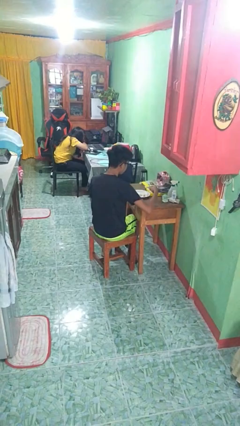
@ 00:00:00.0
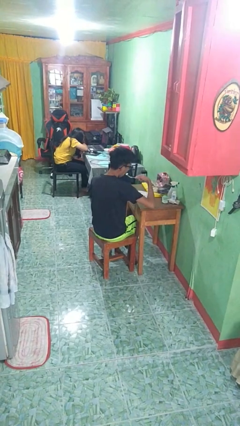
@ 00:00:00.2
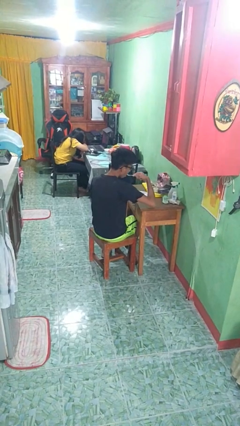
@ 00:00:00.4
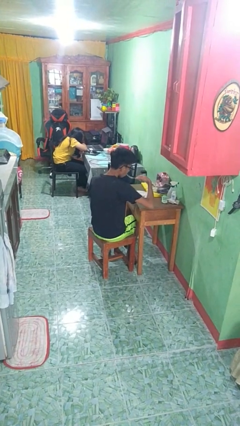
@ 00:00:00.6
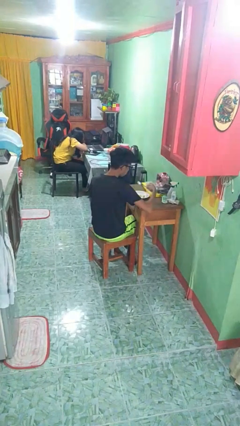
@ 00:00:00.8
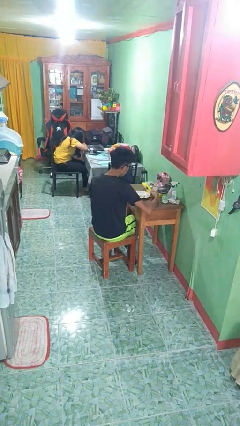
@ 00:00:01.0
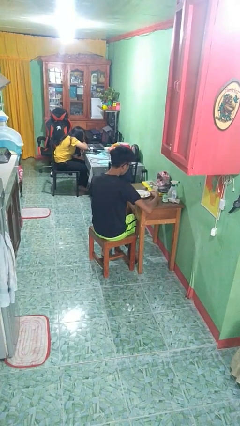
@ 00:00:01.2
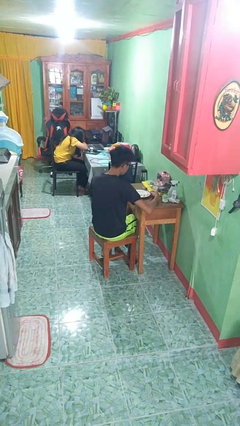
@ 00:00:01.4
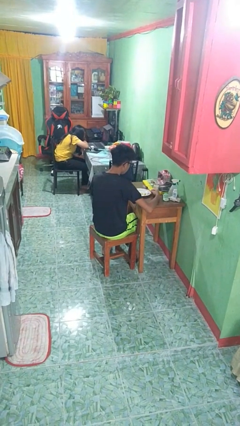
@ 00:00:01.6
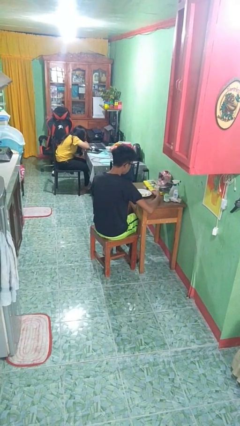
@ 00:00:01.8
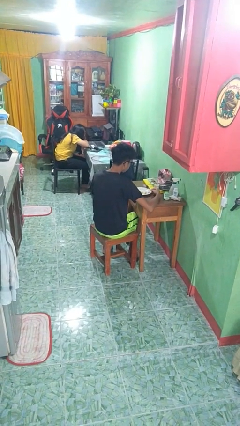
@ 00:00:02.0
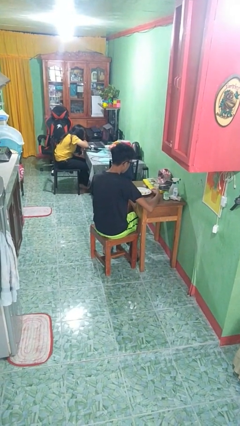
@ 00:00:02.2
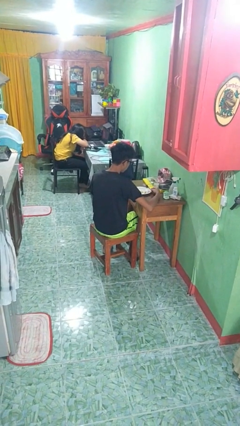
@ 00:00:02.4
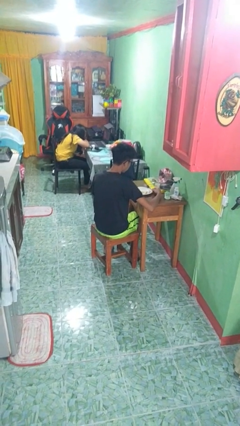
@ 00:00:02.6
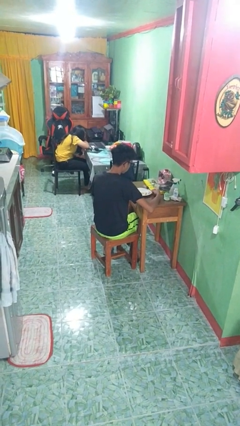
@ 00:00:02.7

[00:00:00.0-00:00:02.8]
person eats with utensil

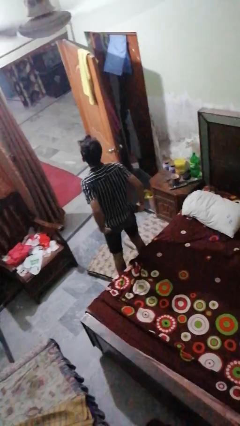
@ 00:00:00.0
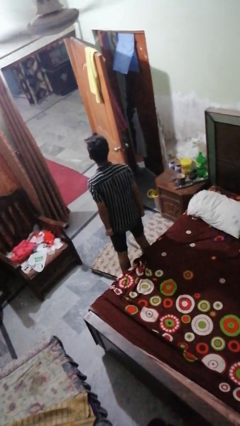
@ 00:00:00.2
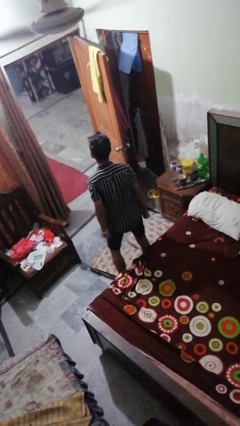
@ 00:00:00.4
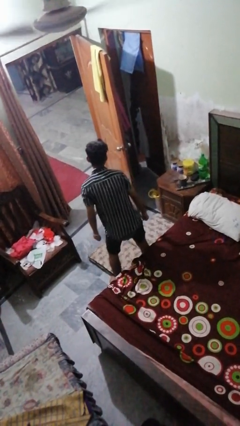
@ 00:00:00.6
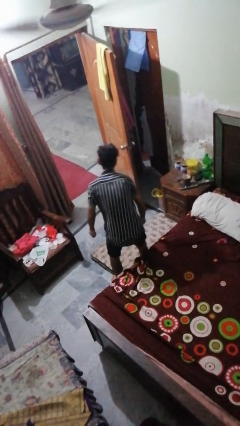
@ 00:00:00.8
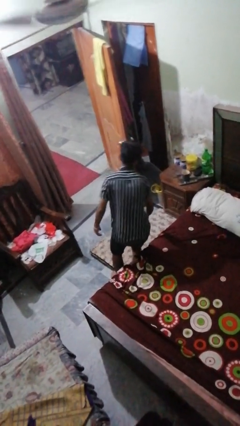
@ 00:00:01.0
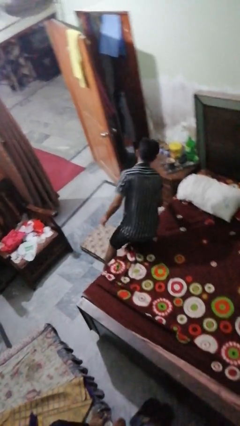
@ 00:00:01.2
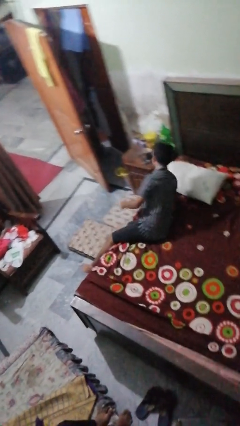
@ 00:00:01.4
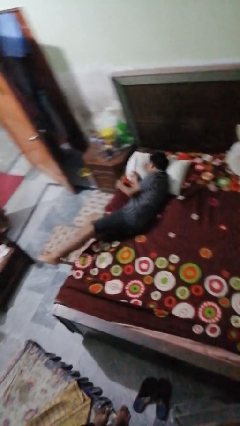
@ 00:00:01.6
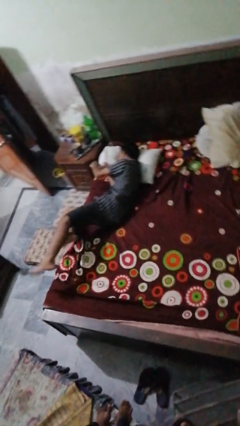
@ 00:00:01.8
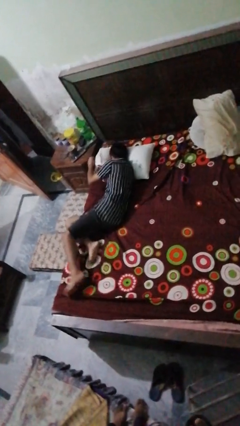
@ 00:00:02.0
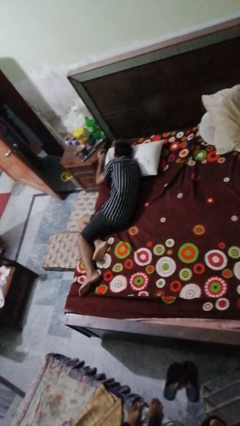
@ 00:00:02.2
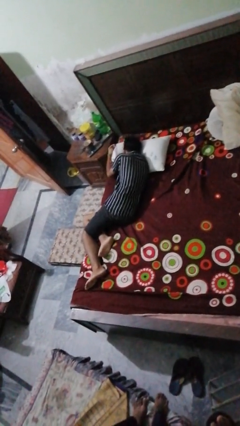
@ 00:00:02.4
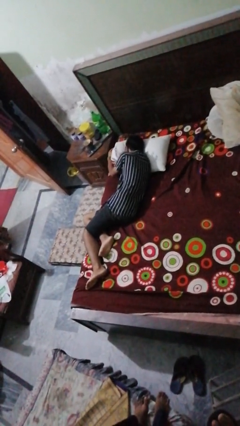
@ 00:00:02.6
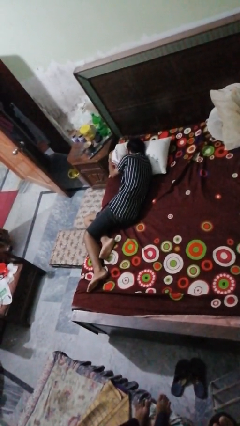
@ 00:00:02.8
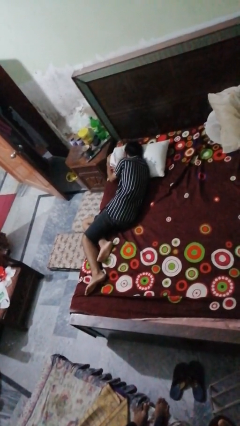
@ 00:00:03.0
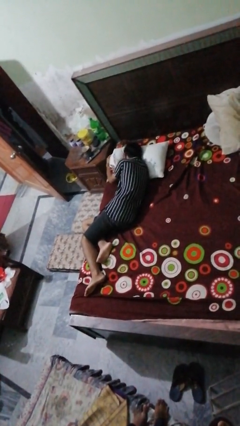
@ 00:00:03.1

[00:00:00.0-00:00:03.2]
person lies down on bed

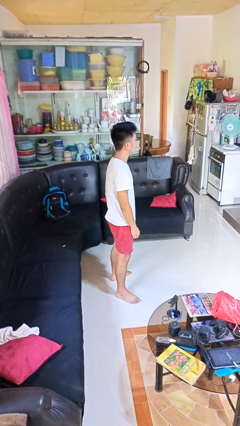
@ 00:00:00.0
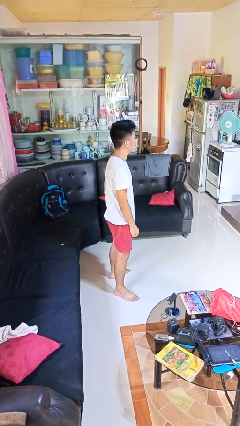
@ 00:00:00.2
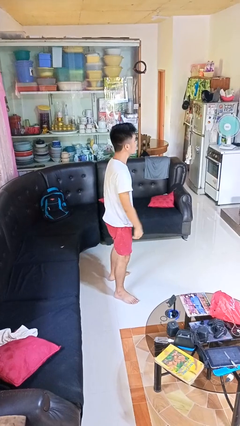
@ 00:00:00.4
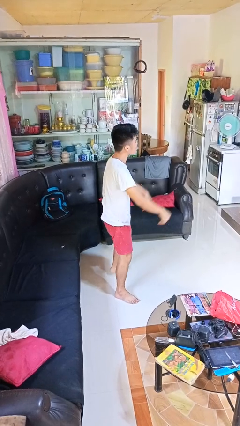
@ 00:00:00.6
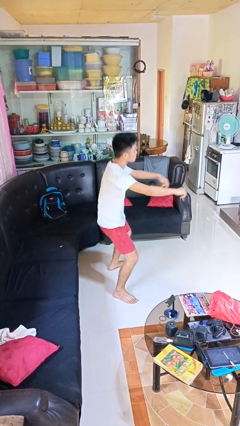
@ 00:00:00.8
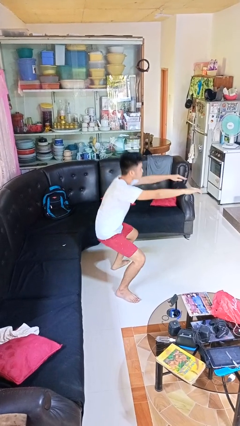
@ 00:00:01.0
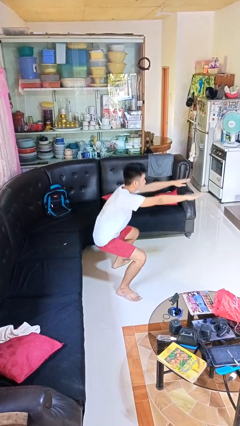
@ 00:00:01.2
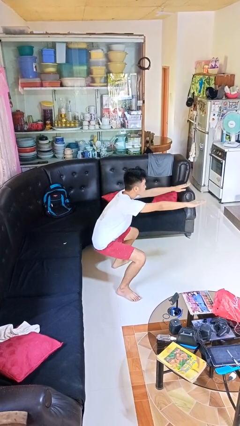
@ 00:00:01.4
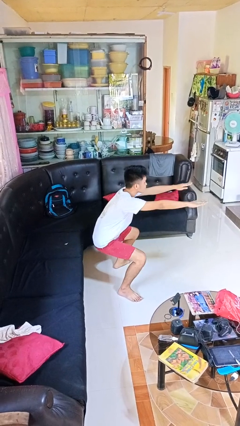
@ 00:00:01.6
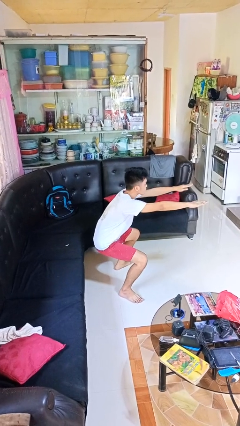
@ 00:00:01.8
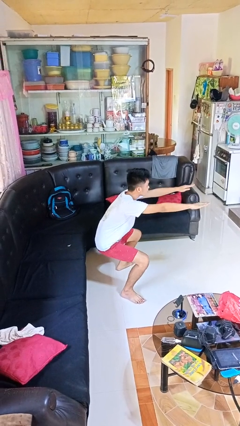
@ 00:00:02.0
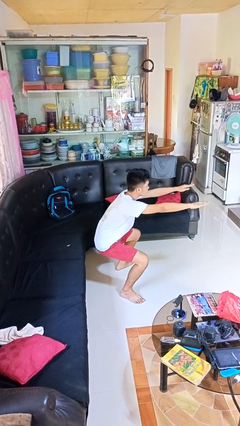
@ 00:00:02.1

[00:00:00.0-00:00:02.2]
person squats

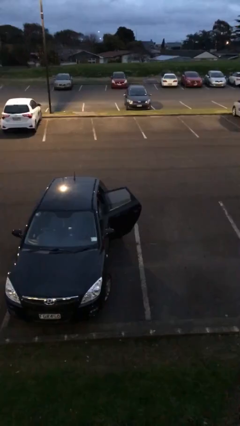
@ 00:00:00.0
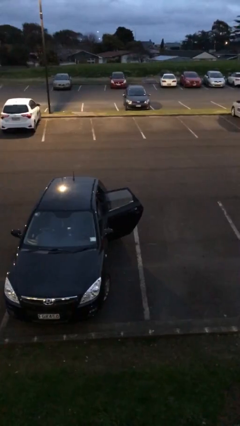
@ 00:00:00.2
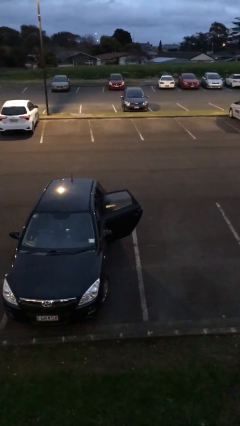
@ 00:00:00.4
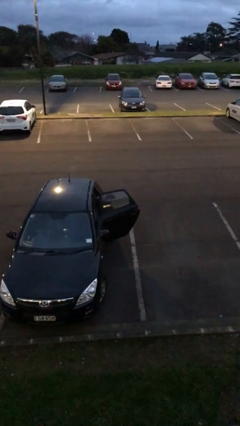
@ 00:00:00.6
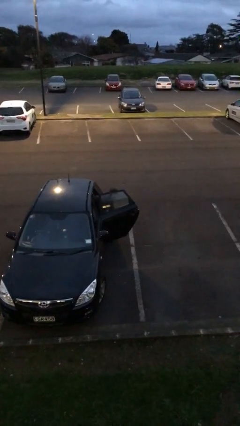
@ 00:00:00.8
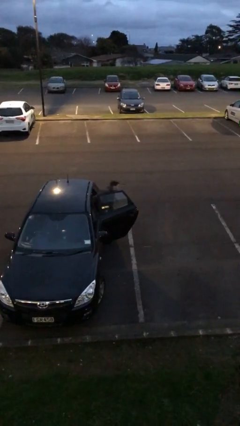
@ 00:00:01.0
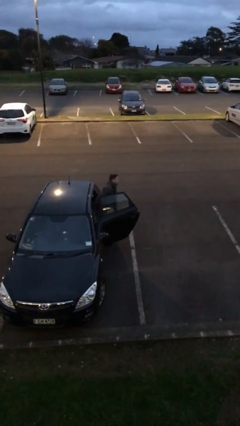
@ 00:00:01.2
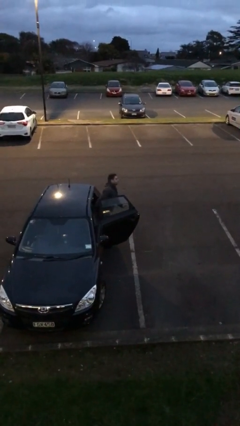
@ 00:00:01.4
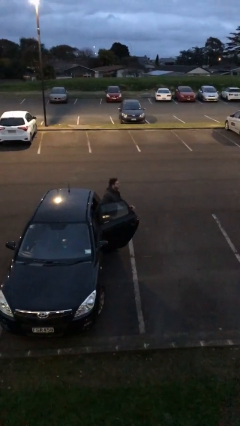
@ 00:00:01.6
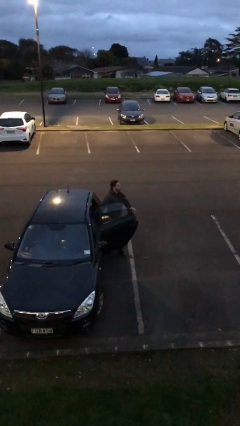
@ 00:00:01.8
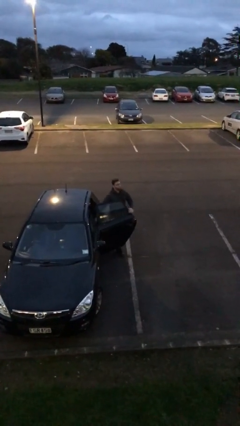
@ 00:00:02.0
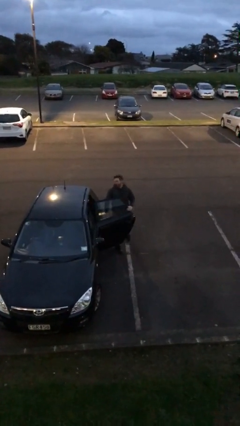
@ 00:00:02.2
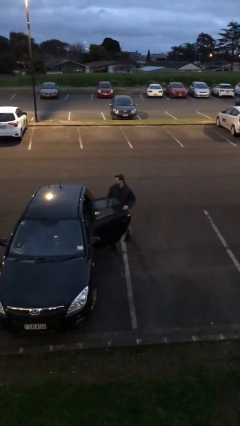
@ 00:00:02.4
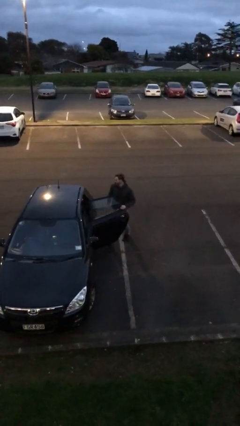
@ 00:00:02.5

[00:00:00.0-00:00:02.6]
person exits car

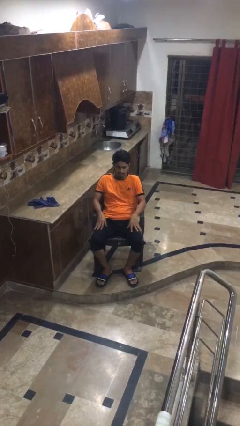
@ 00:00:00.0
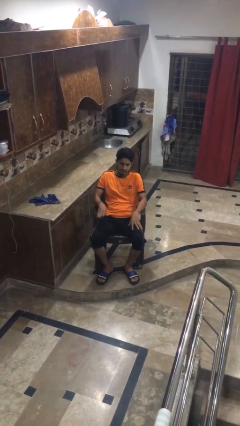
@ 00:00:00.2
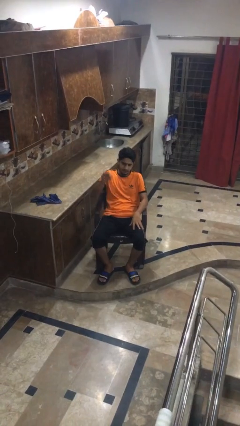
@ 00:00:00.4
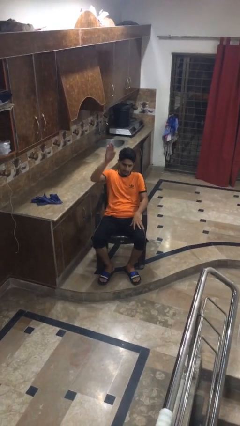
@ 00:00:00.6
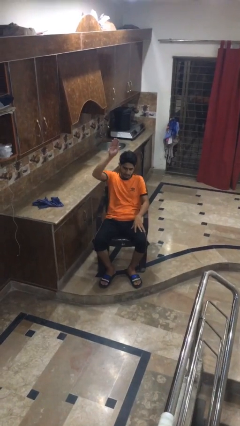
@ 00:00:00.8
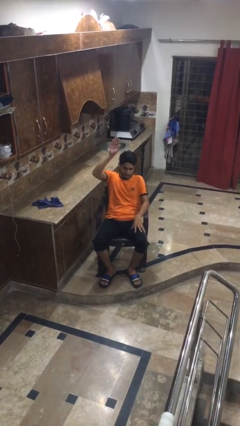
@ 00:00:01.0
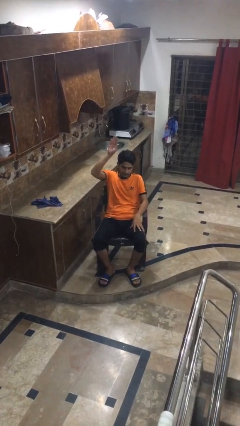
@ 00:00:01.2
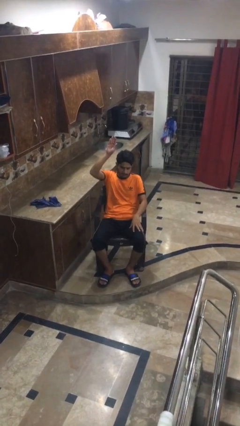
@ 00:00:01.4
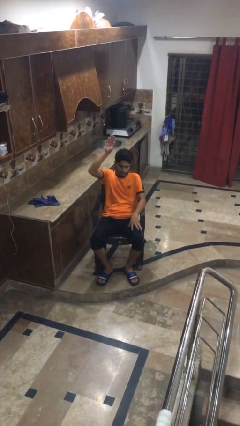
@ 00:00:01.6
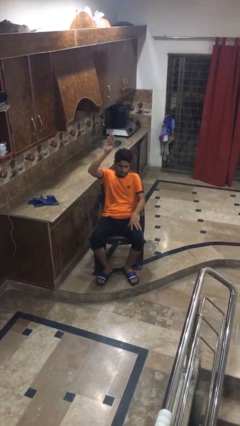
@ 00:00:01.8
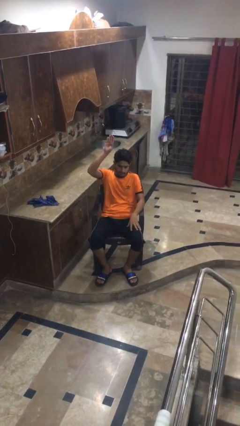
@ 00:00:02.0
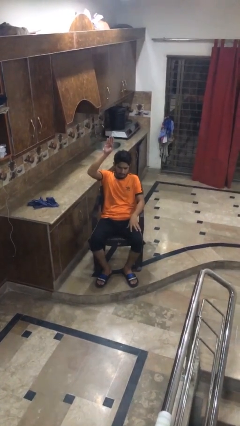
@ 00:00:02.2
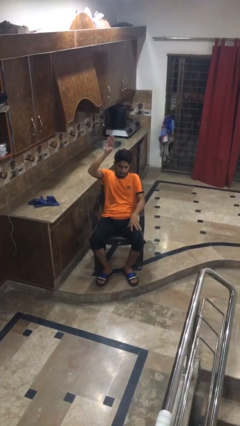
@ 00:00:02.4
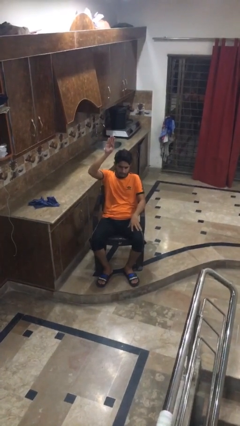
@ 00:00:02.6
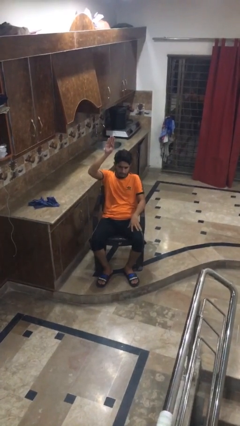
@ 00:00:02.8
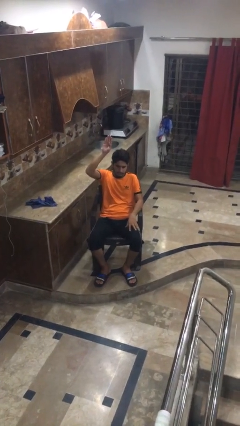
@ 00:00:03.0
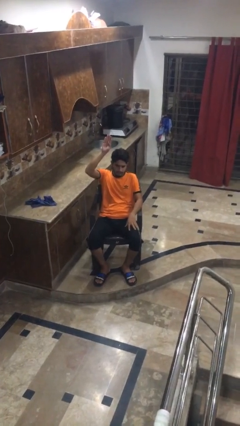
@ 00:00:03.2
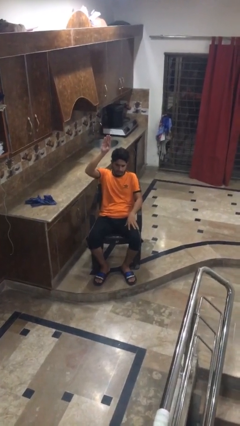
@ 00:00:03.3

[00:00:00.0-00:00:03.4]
person gestures raise hand

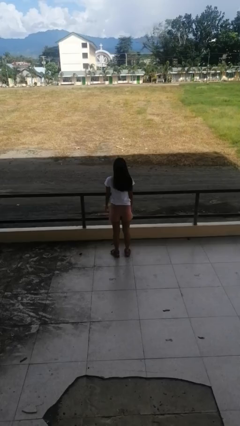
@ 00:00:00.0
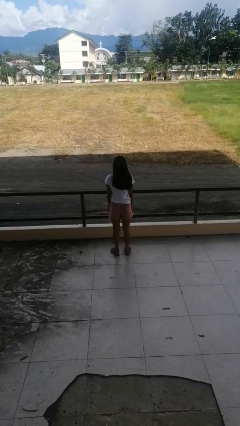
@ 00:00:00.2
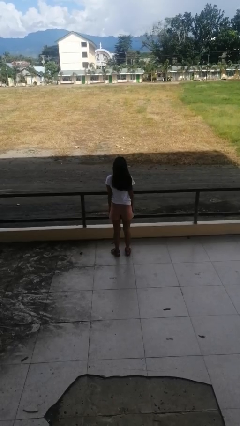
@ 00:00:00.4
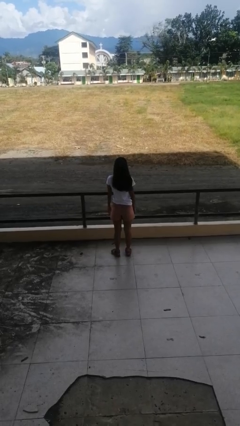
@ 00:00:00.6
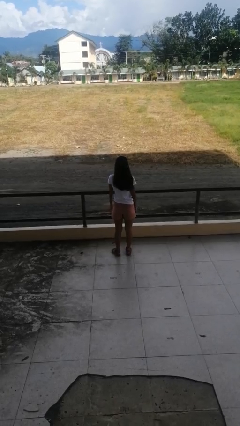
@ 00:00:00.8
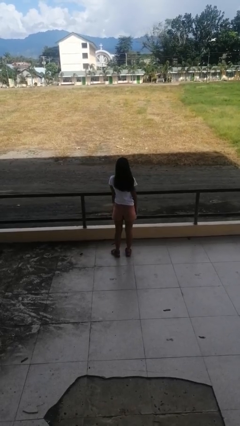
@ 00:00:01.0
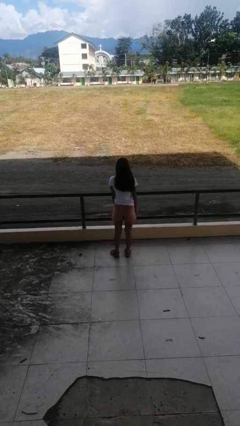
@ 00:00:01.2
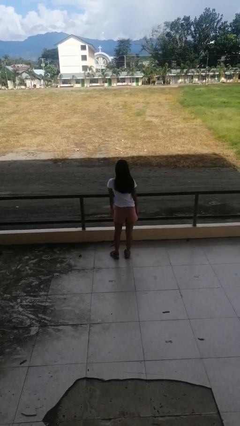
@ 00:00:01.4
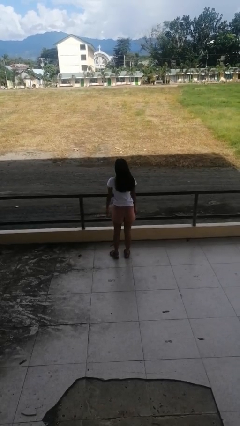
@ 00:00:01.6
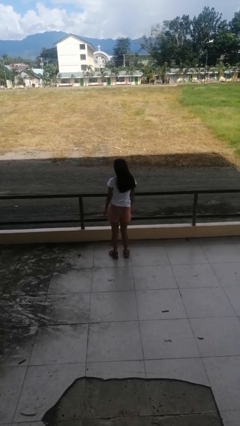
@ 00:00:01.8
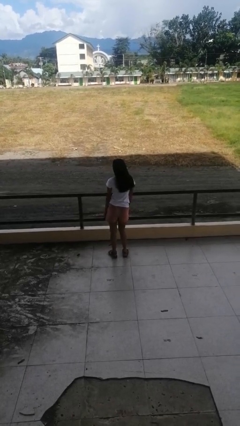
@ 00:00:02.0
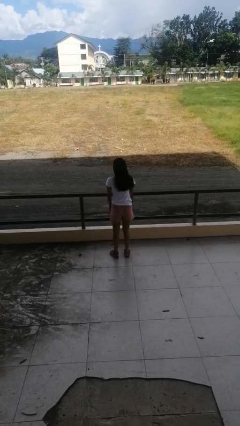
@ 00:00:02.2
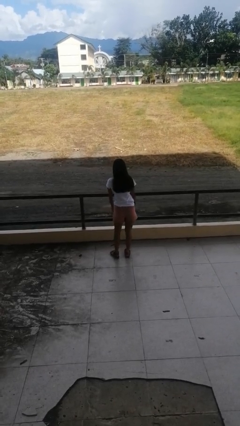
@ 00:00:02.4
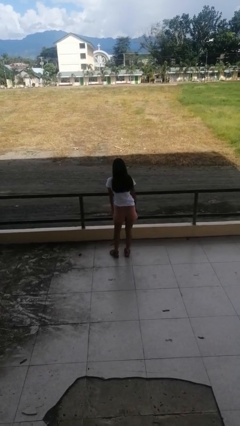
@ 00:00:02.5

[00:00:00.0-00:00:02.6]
person wiggles hips

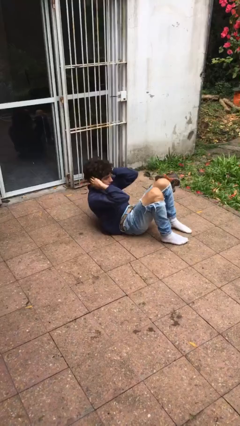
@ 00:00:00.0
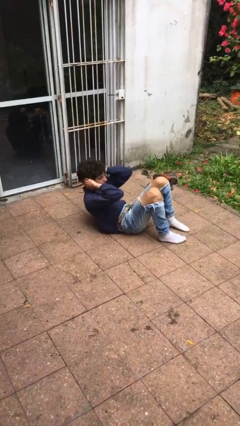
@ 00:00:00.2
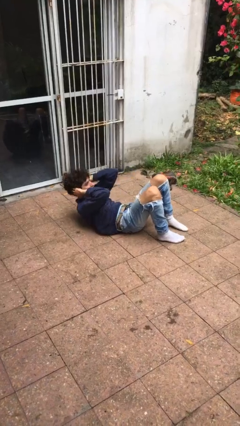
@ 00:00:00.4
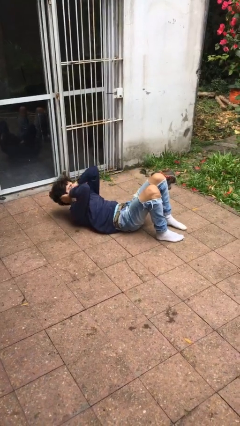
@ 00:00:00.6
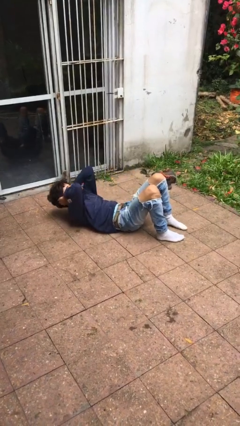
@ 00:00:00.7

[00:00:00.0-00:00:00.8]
person exercises with situp
